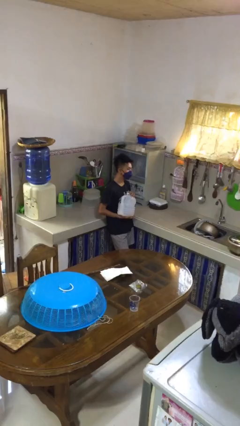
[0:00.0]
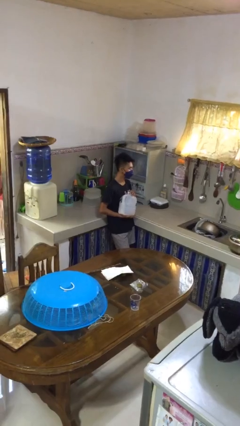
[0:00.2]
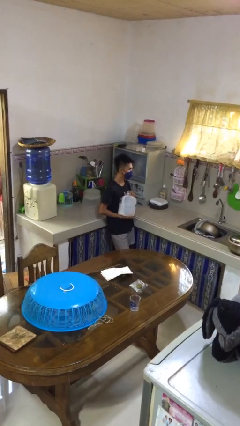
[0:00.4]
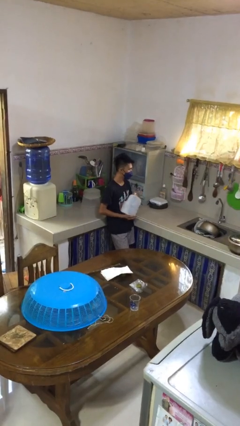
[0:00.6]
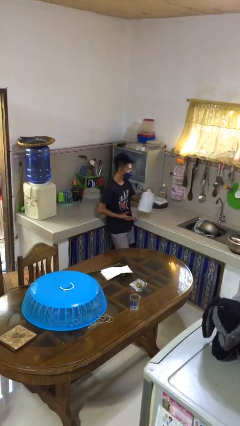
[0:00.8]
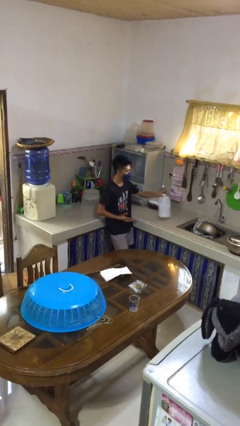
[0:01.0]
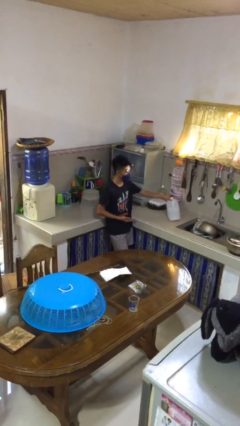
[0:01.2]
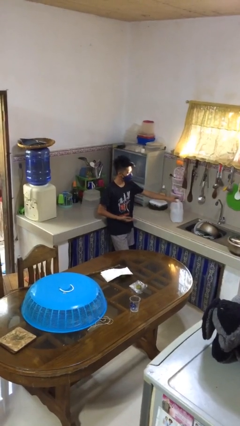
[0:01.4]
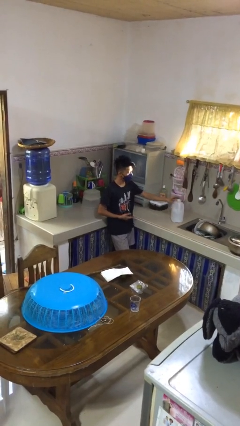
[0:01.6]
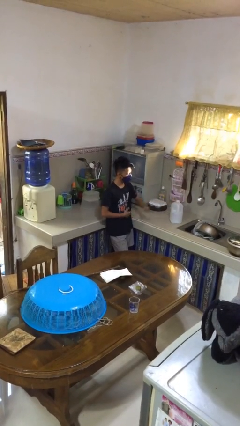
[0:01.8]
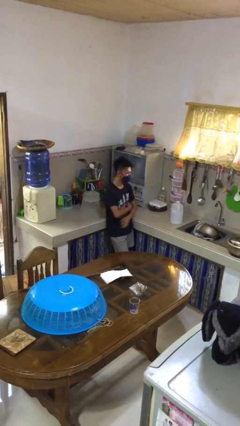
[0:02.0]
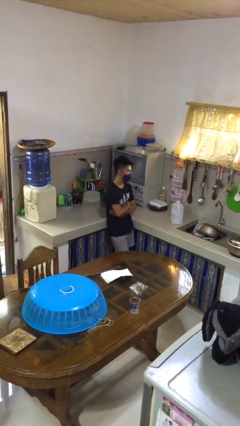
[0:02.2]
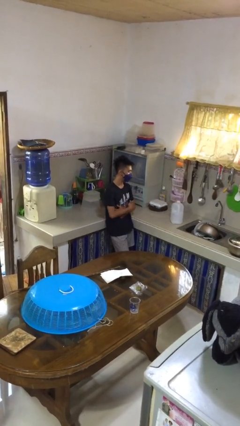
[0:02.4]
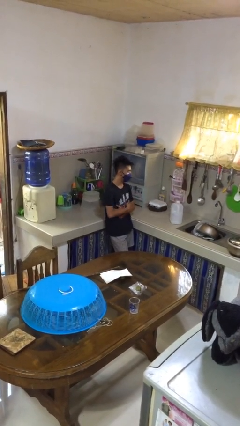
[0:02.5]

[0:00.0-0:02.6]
person picks up object from countertop

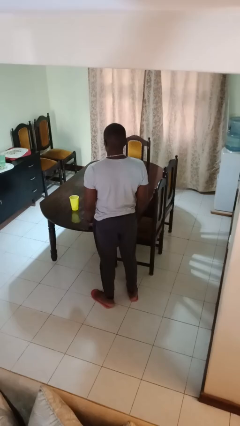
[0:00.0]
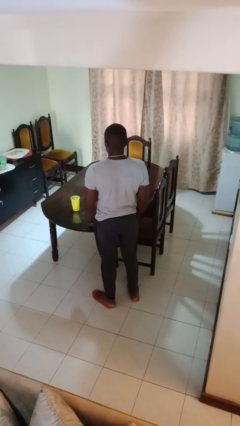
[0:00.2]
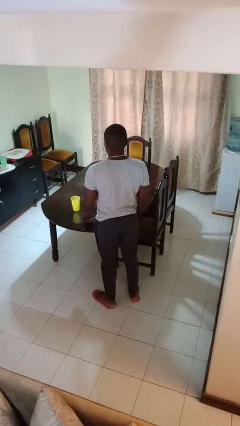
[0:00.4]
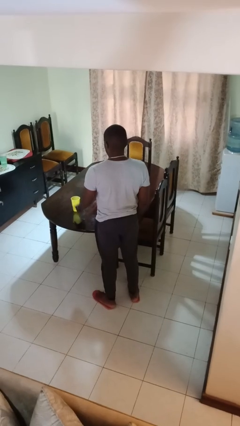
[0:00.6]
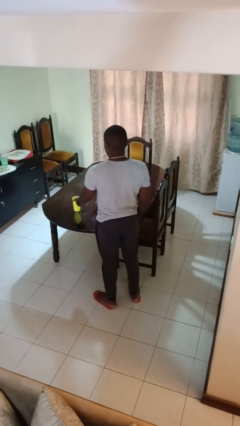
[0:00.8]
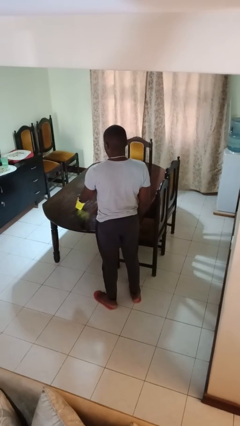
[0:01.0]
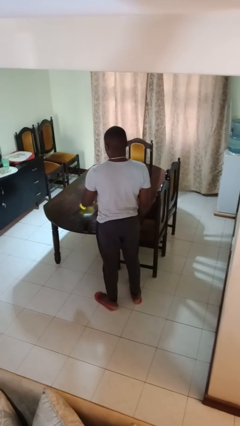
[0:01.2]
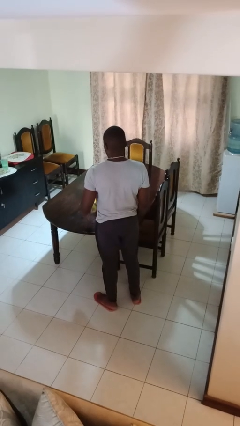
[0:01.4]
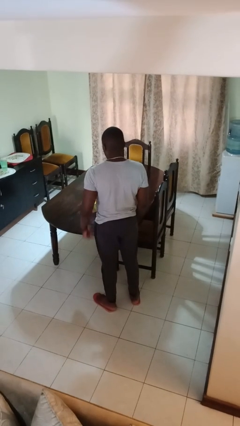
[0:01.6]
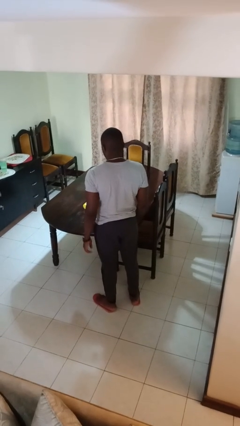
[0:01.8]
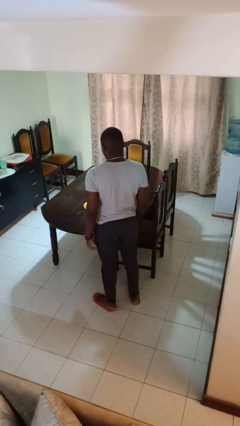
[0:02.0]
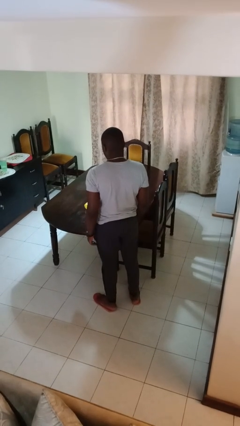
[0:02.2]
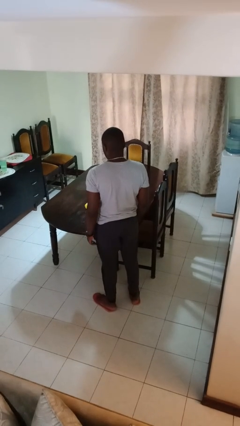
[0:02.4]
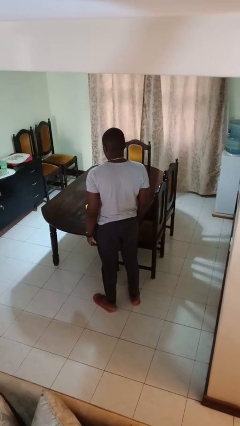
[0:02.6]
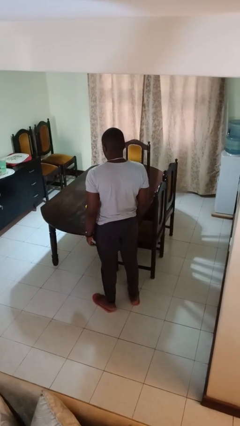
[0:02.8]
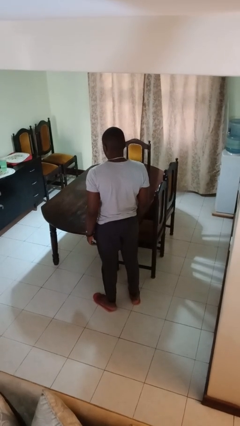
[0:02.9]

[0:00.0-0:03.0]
person knocks over glass

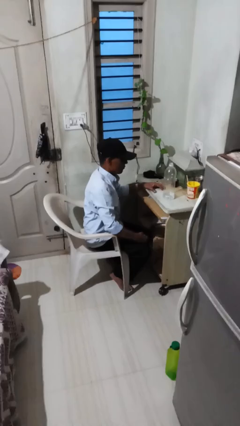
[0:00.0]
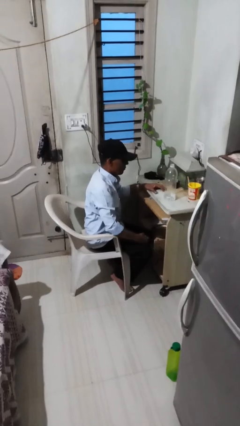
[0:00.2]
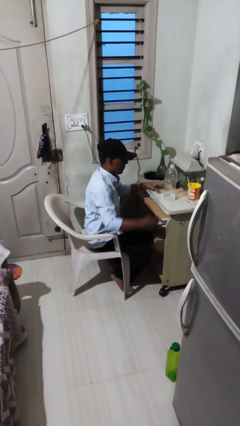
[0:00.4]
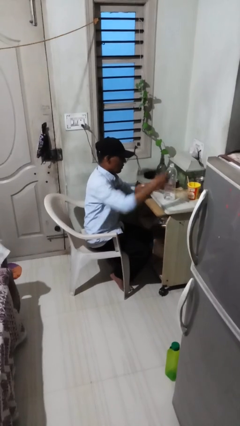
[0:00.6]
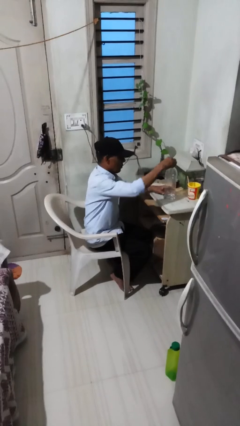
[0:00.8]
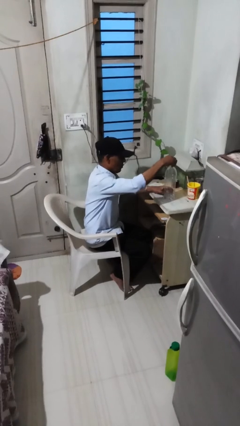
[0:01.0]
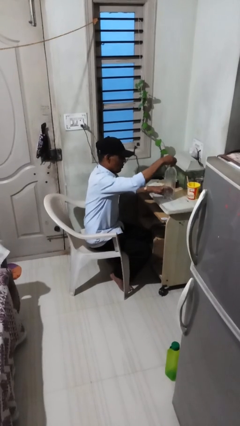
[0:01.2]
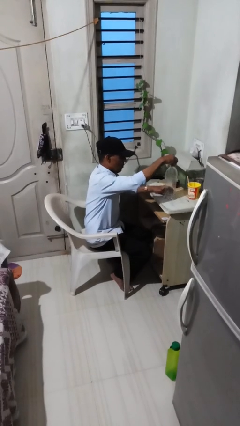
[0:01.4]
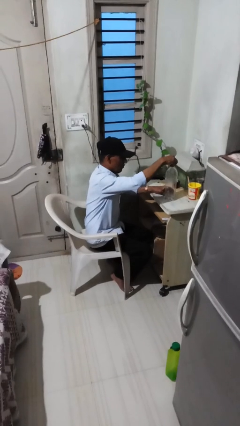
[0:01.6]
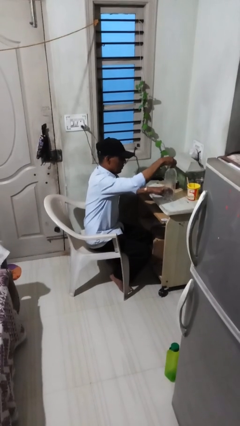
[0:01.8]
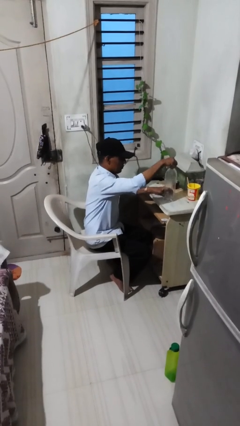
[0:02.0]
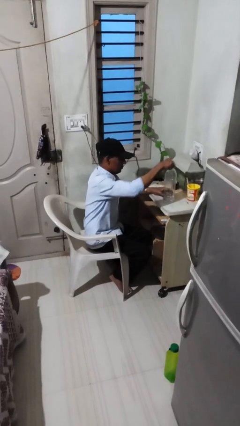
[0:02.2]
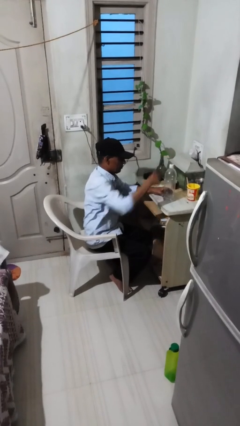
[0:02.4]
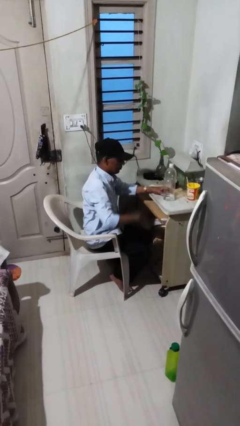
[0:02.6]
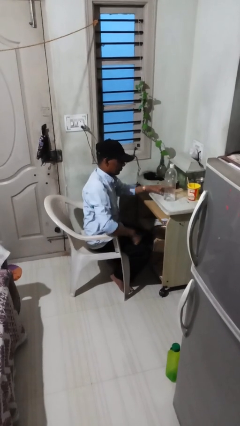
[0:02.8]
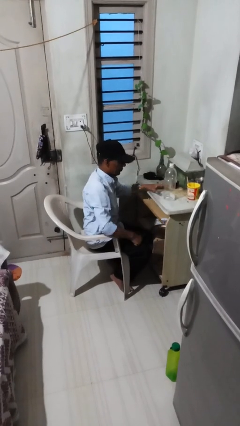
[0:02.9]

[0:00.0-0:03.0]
person screws lid to bottle

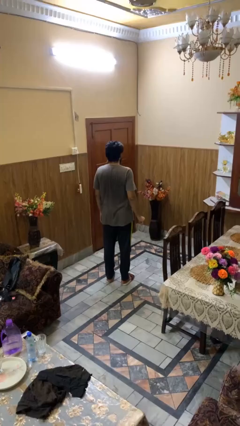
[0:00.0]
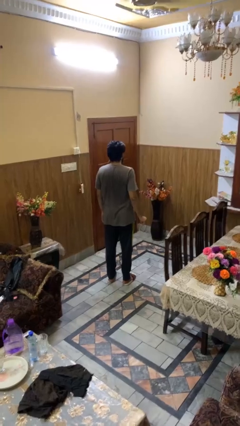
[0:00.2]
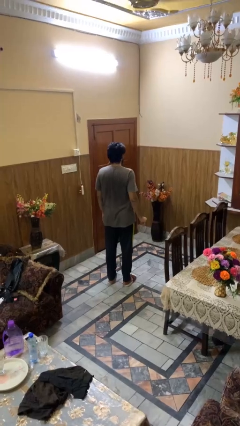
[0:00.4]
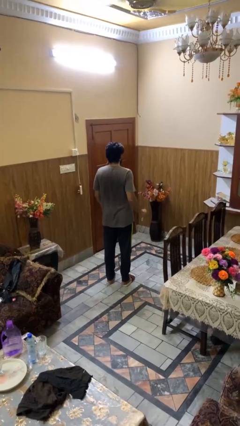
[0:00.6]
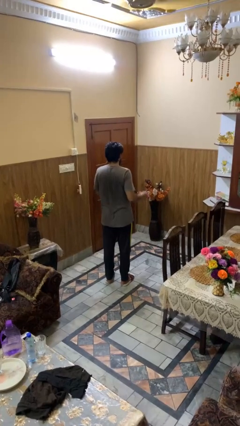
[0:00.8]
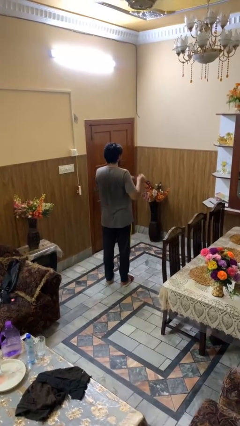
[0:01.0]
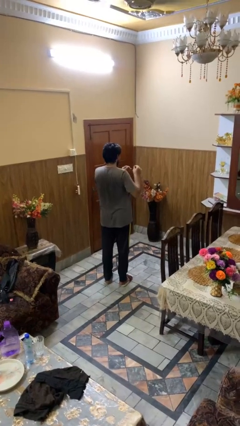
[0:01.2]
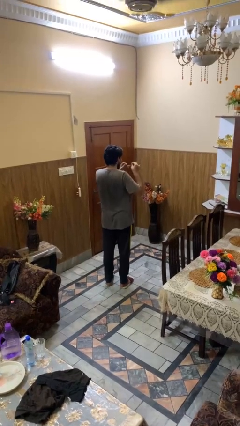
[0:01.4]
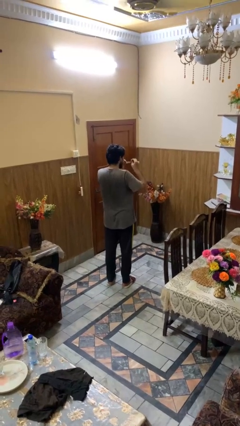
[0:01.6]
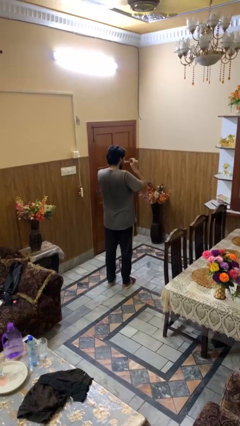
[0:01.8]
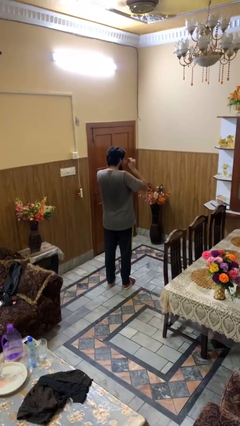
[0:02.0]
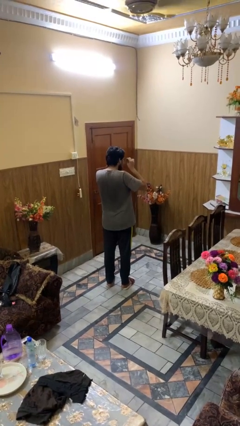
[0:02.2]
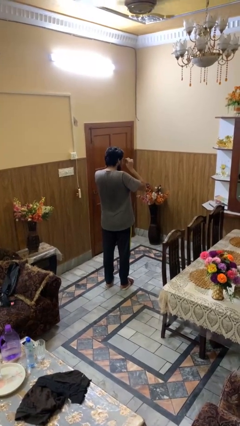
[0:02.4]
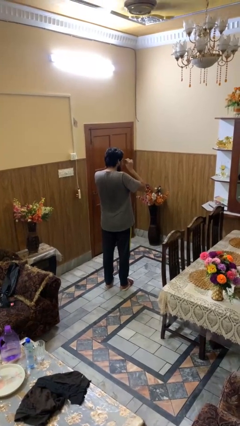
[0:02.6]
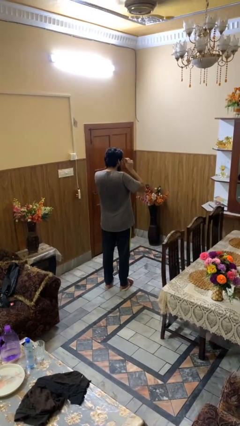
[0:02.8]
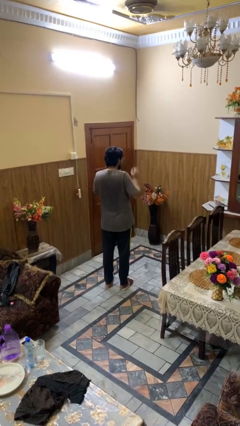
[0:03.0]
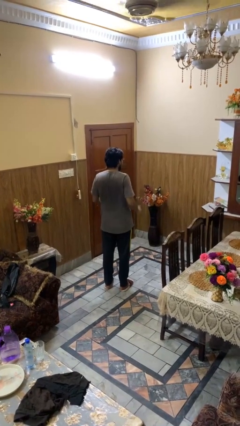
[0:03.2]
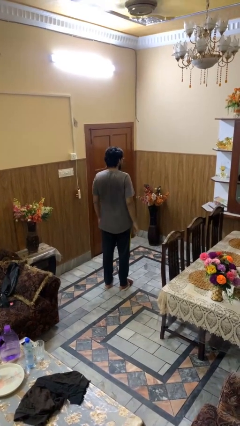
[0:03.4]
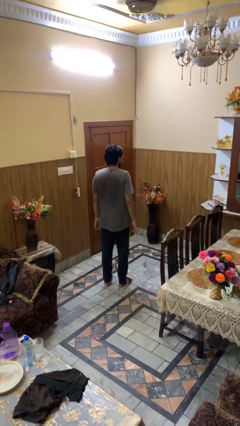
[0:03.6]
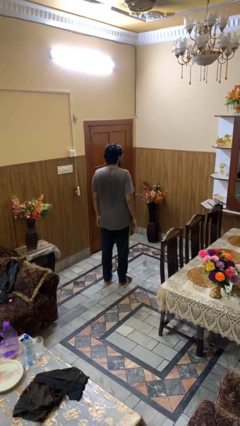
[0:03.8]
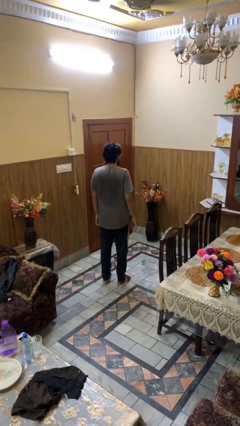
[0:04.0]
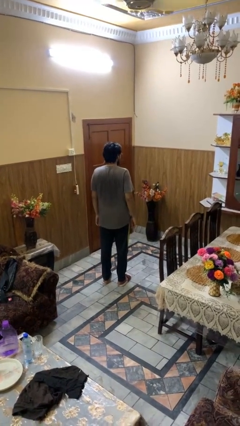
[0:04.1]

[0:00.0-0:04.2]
person puts on glasses

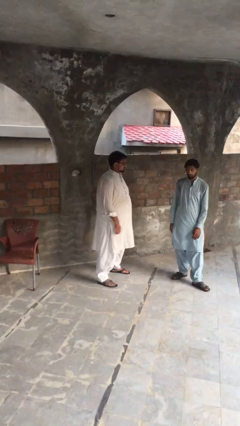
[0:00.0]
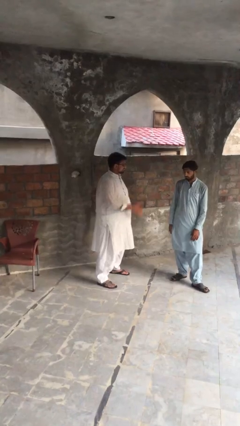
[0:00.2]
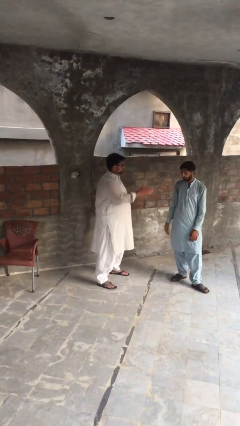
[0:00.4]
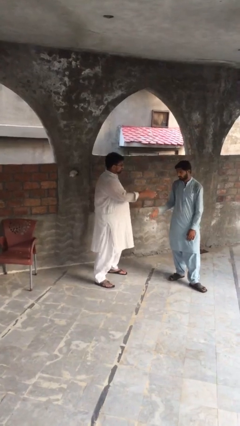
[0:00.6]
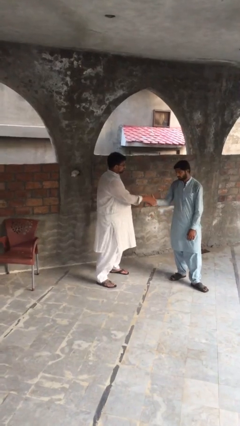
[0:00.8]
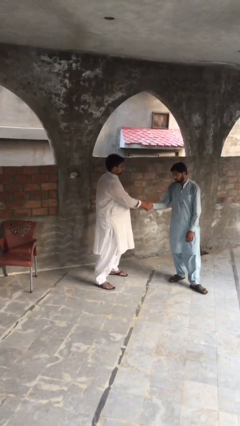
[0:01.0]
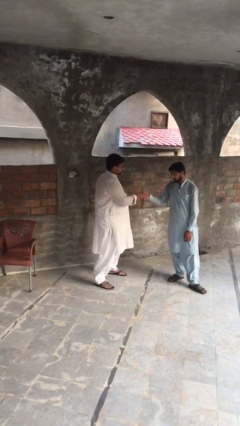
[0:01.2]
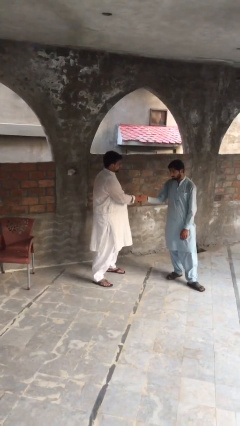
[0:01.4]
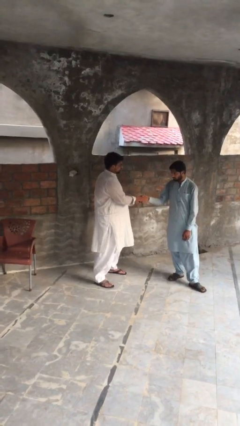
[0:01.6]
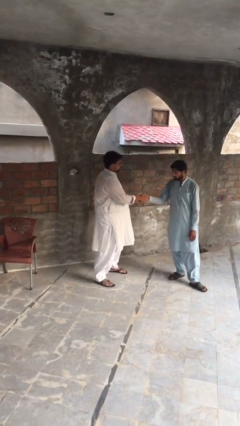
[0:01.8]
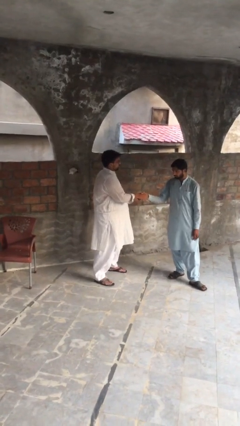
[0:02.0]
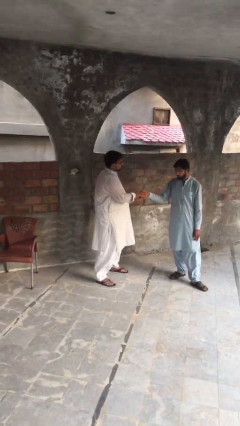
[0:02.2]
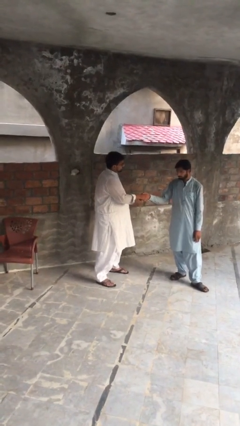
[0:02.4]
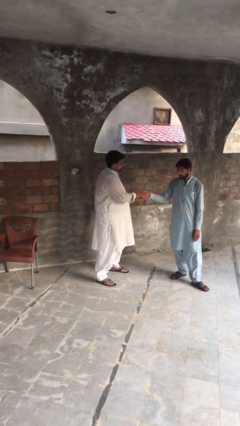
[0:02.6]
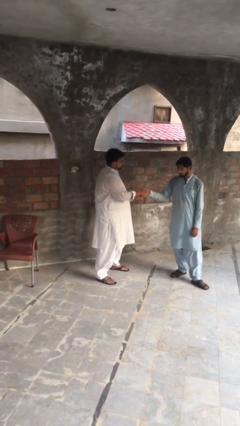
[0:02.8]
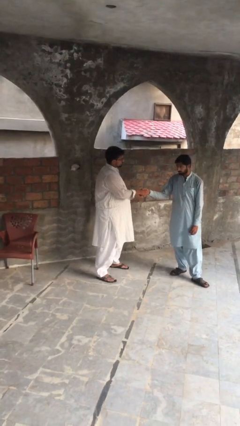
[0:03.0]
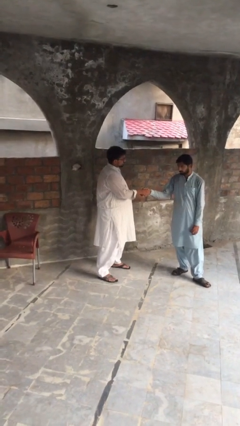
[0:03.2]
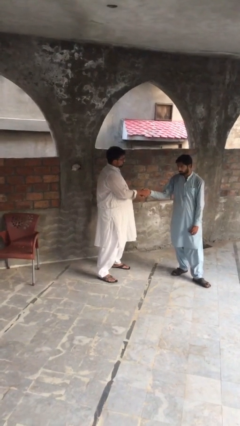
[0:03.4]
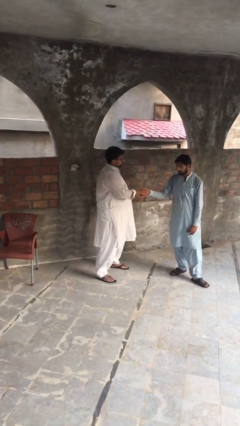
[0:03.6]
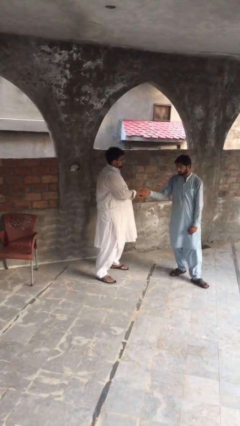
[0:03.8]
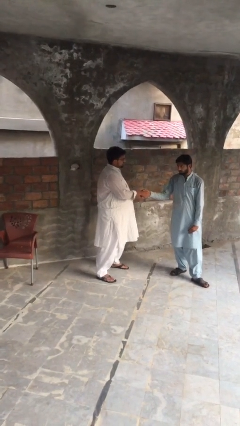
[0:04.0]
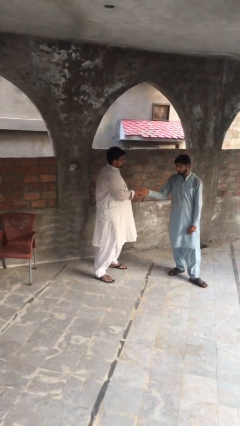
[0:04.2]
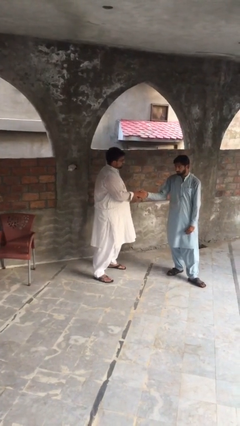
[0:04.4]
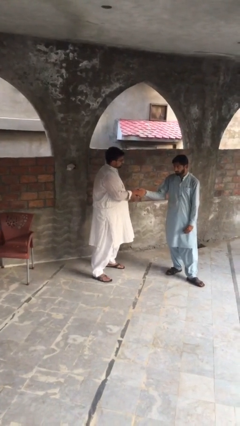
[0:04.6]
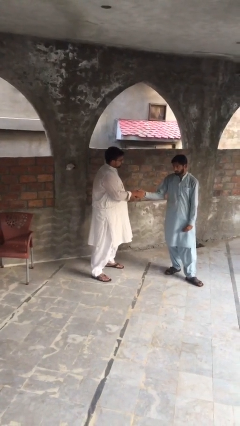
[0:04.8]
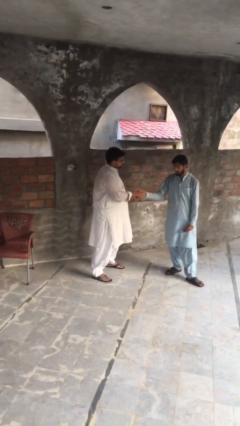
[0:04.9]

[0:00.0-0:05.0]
person shakes hand
